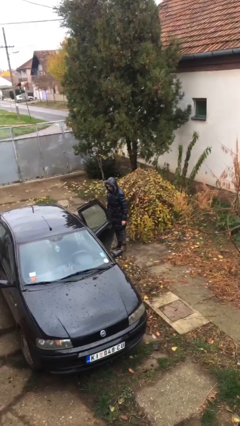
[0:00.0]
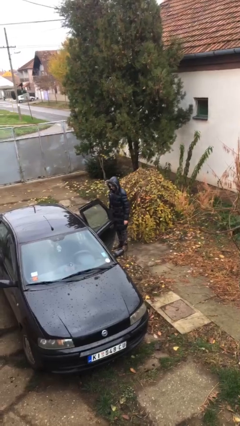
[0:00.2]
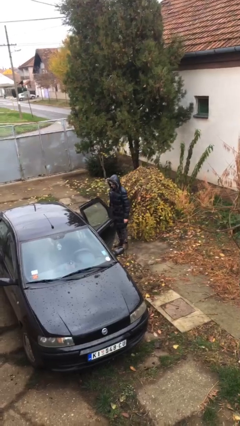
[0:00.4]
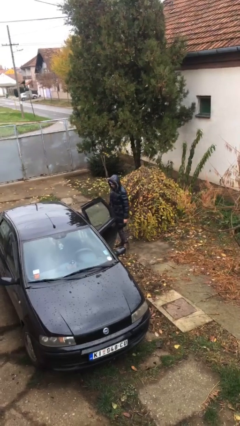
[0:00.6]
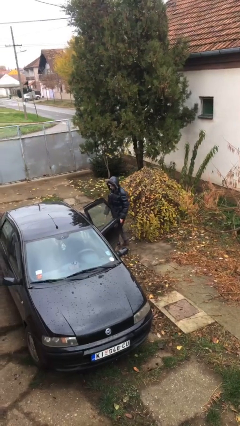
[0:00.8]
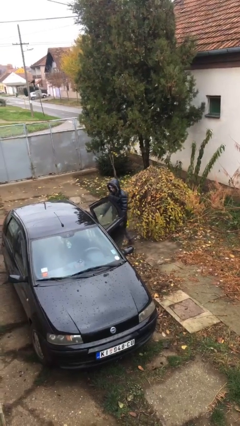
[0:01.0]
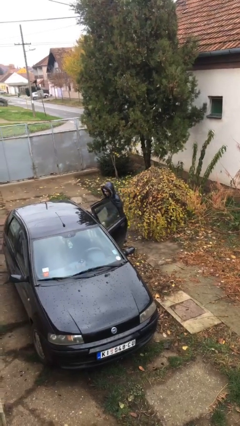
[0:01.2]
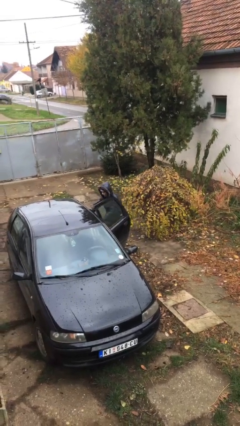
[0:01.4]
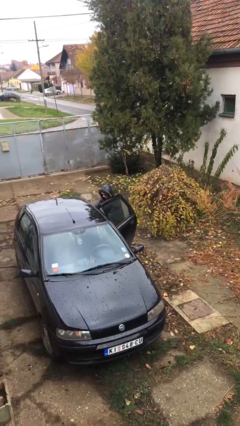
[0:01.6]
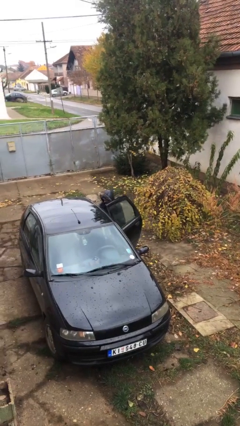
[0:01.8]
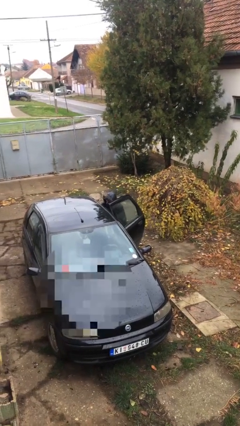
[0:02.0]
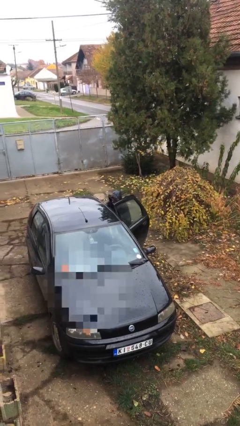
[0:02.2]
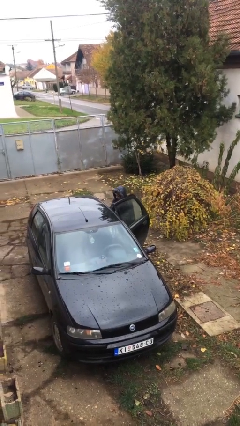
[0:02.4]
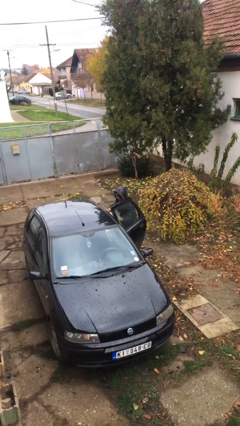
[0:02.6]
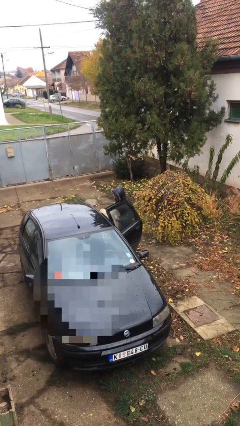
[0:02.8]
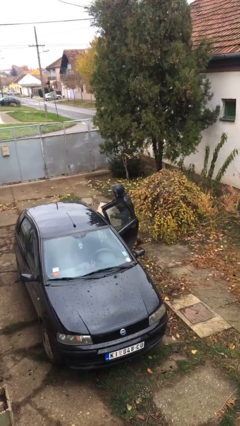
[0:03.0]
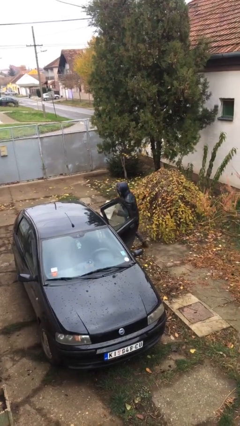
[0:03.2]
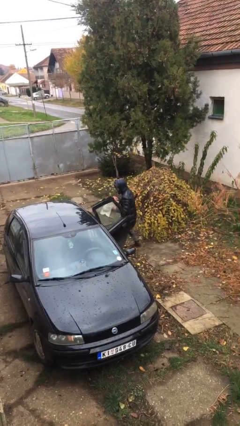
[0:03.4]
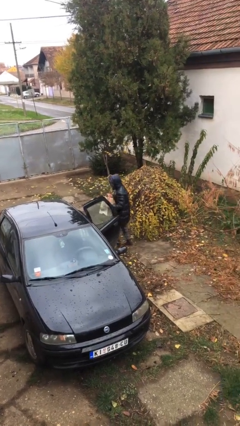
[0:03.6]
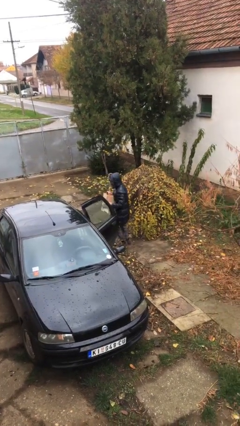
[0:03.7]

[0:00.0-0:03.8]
person unloads car

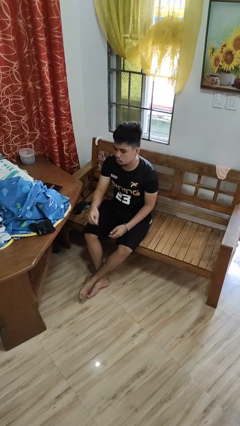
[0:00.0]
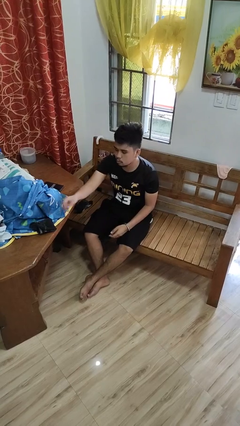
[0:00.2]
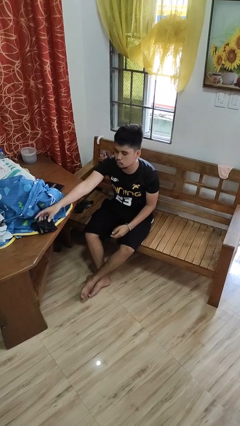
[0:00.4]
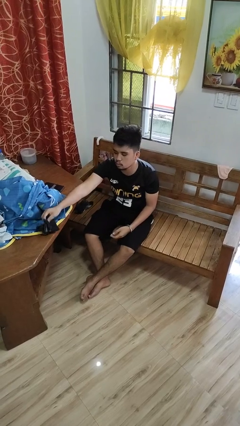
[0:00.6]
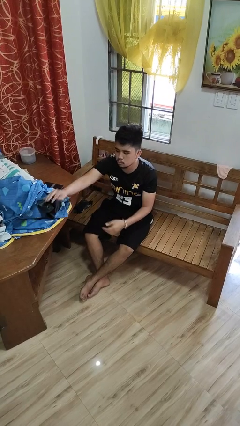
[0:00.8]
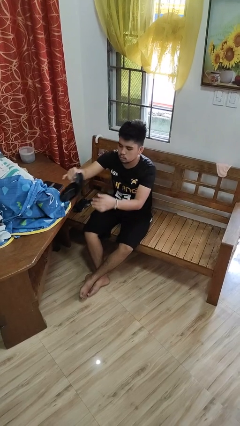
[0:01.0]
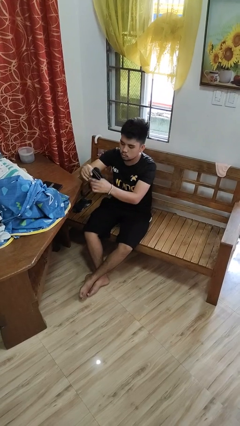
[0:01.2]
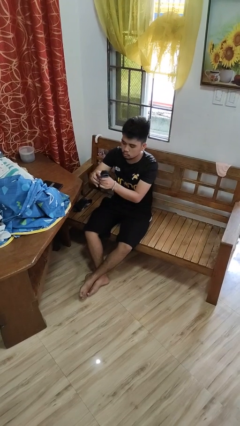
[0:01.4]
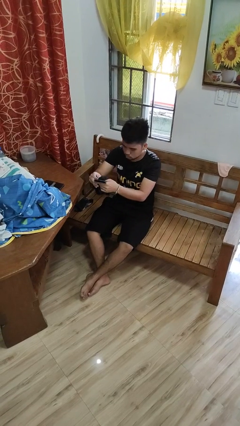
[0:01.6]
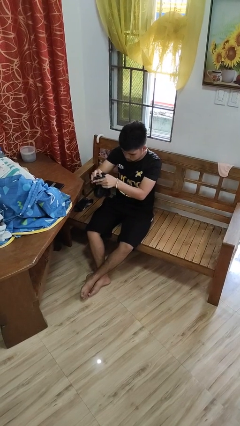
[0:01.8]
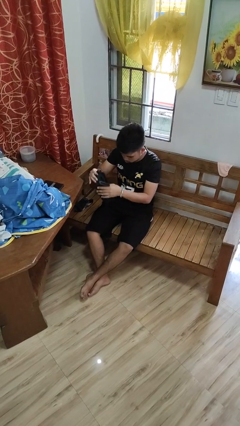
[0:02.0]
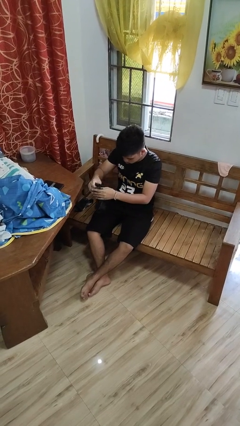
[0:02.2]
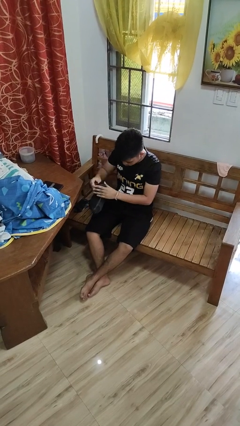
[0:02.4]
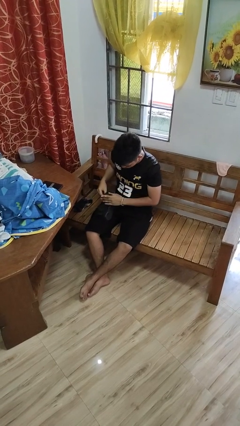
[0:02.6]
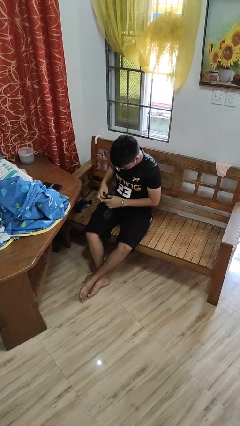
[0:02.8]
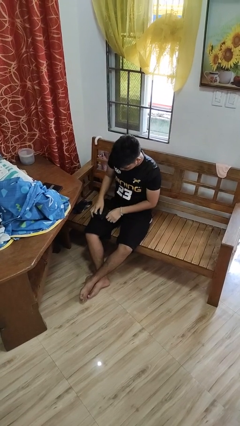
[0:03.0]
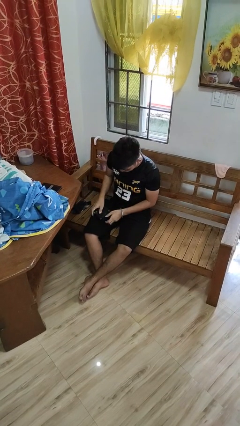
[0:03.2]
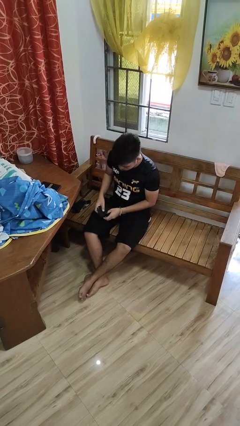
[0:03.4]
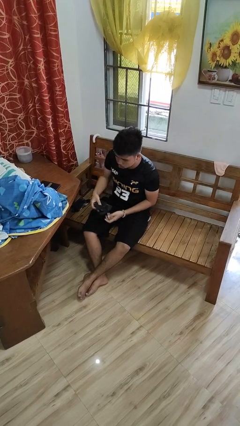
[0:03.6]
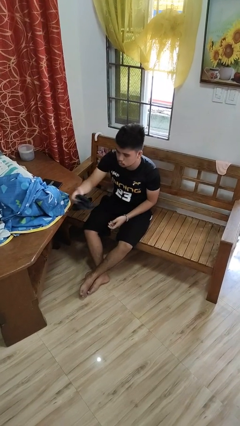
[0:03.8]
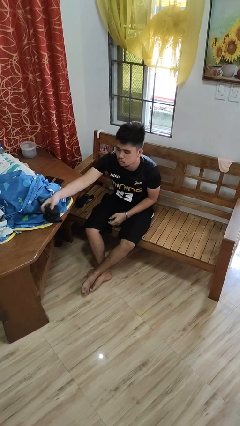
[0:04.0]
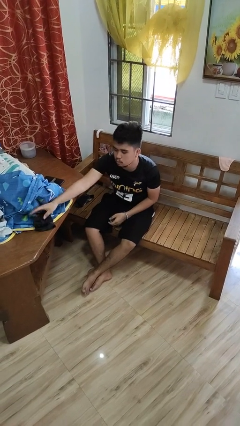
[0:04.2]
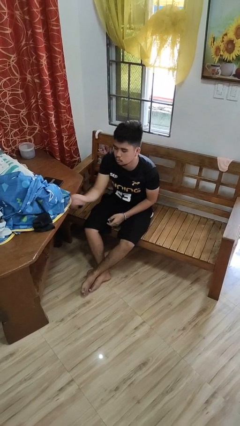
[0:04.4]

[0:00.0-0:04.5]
person folds socks

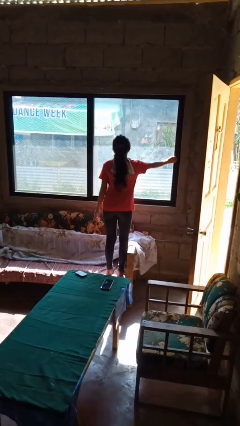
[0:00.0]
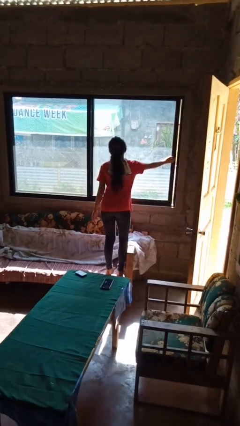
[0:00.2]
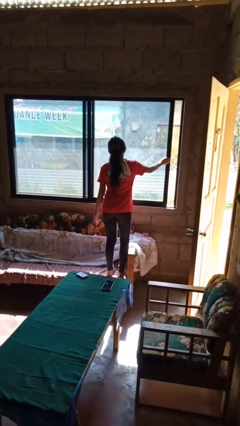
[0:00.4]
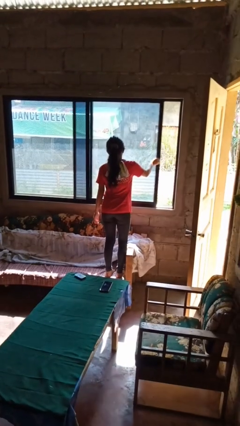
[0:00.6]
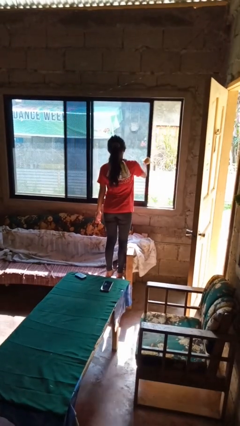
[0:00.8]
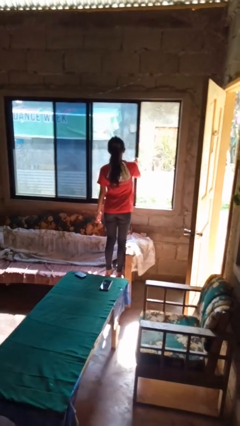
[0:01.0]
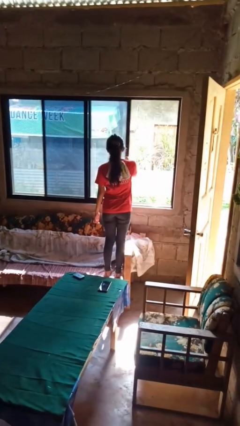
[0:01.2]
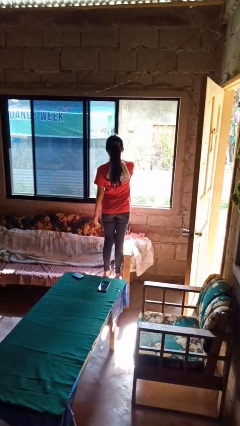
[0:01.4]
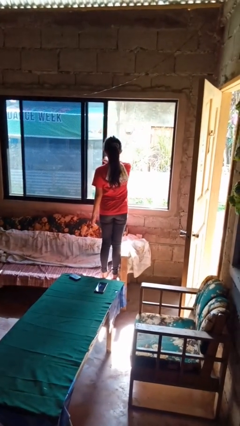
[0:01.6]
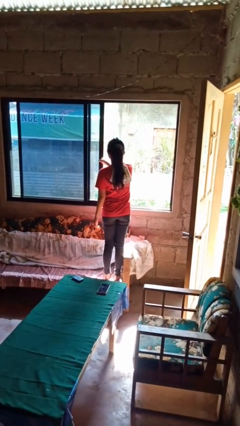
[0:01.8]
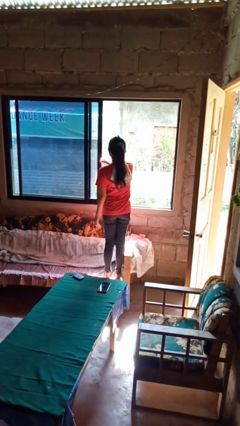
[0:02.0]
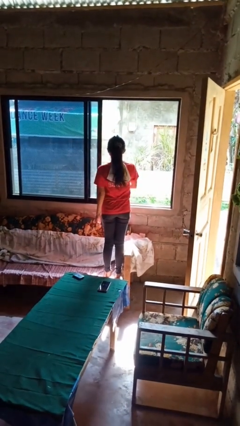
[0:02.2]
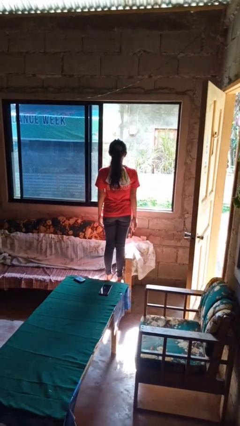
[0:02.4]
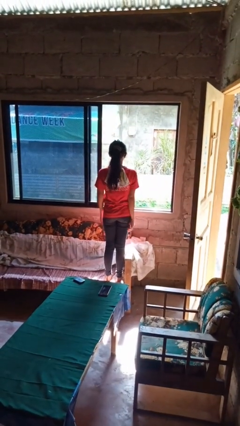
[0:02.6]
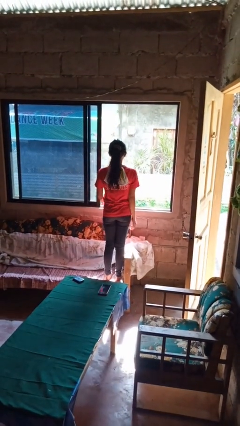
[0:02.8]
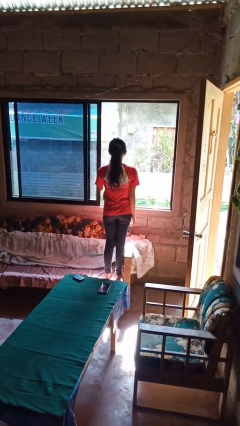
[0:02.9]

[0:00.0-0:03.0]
person opens home window

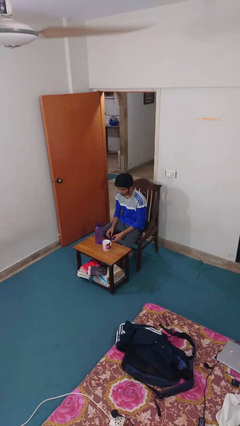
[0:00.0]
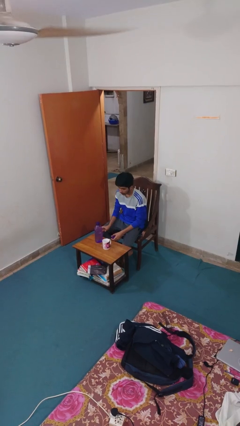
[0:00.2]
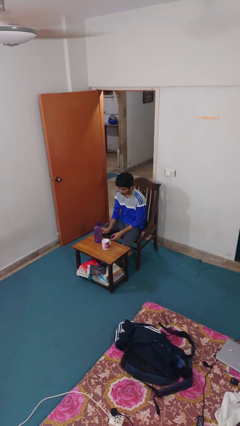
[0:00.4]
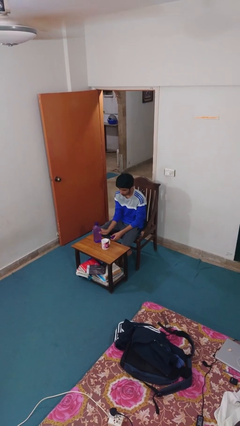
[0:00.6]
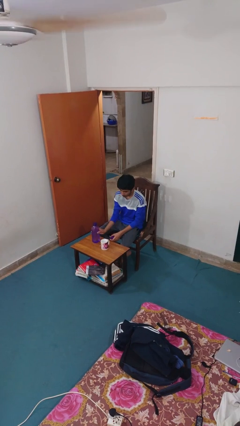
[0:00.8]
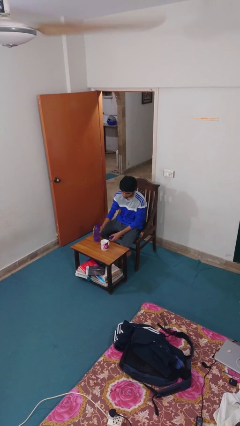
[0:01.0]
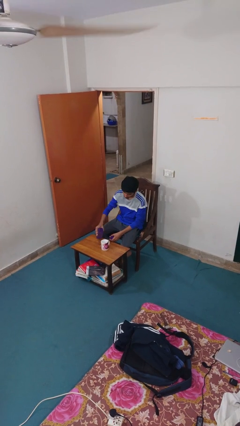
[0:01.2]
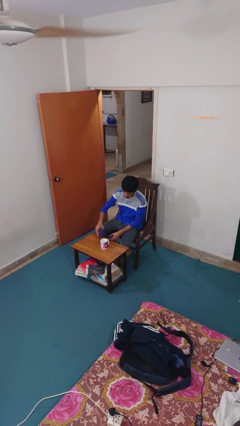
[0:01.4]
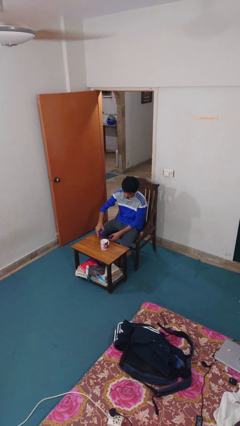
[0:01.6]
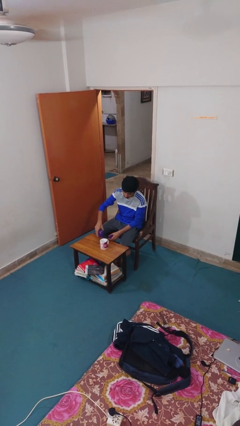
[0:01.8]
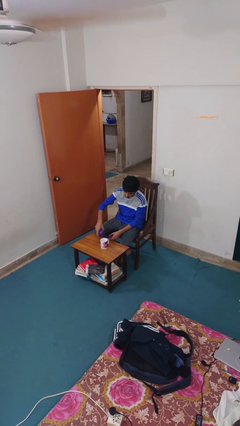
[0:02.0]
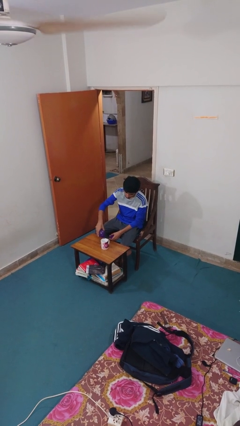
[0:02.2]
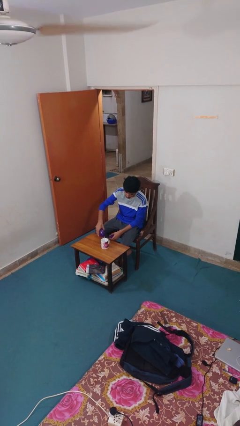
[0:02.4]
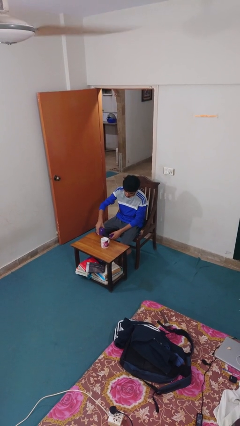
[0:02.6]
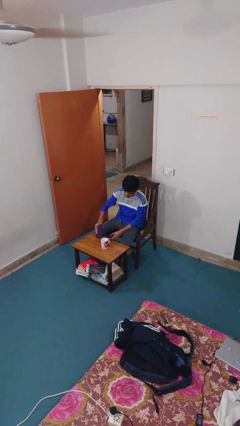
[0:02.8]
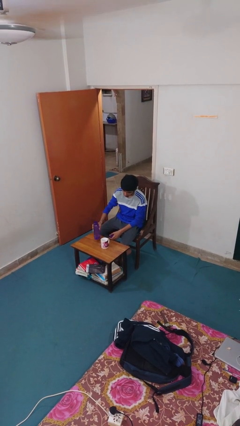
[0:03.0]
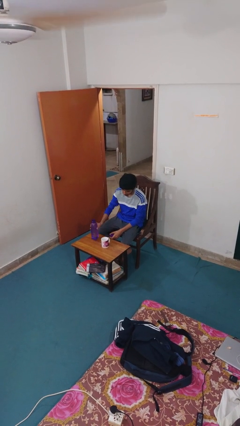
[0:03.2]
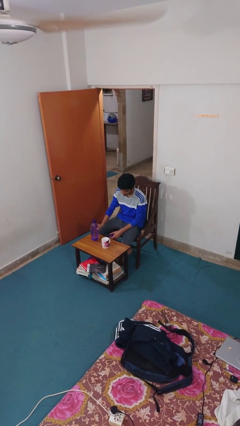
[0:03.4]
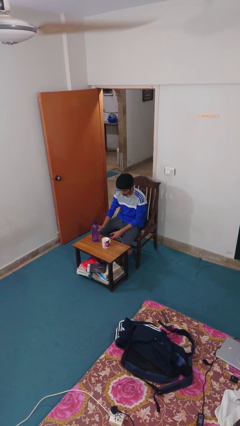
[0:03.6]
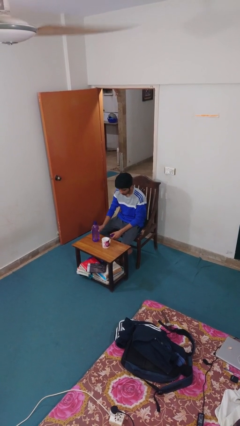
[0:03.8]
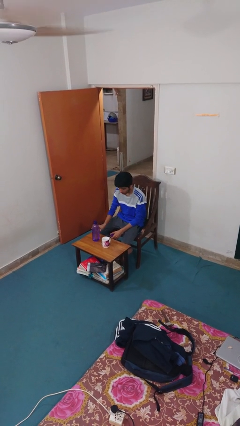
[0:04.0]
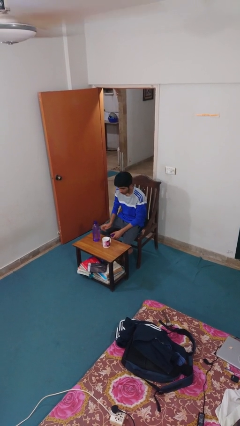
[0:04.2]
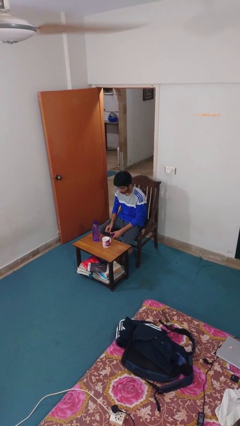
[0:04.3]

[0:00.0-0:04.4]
person pours liquid into cup

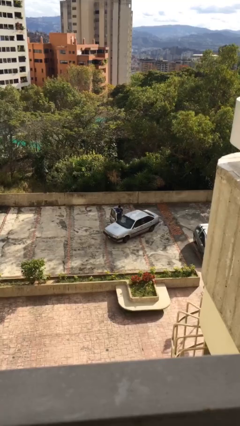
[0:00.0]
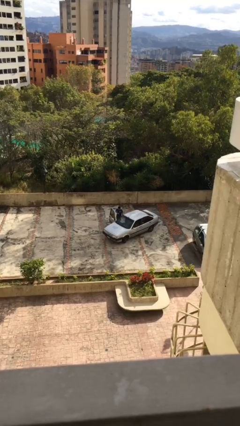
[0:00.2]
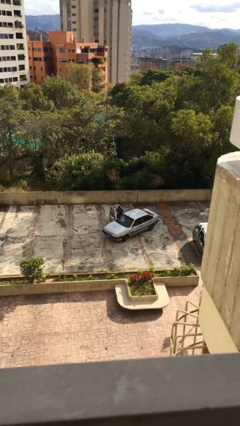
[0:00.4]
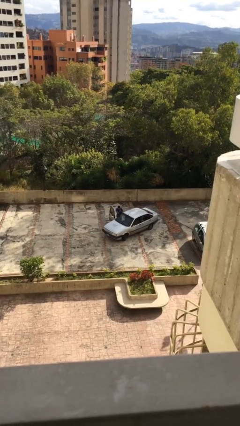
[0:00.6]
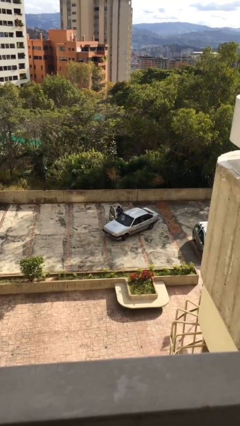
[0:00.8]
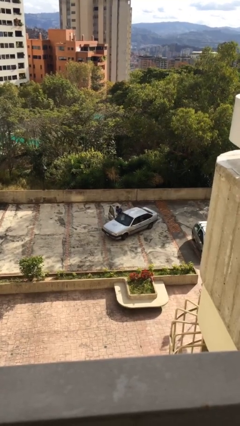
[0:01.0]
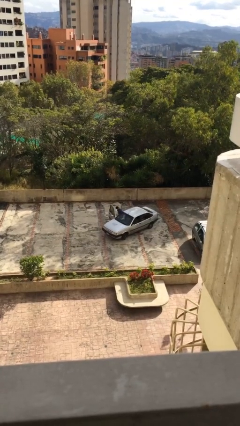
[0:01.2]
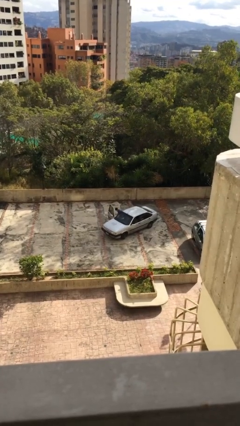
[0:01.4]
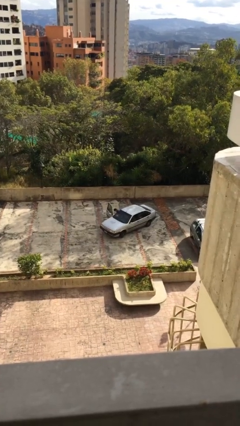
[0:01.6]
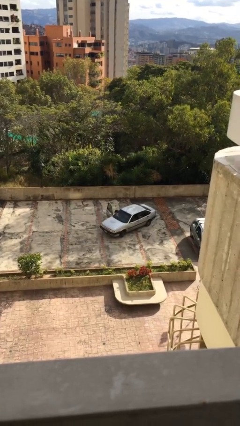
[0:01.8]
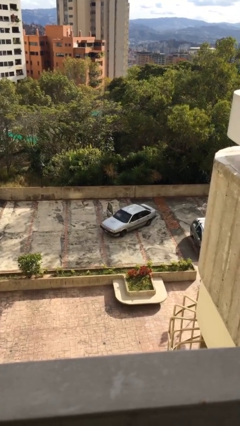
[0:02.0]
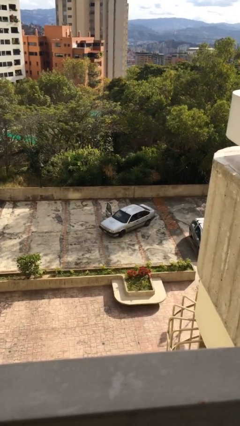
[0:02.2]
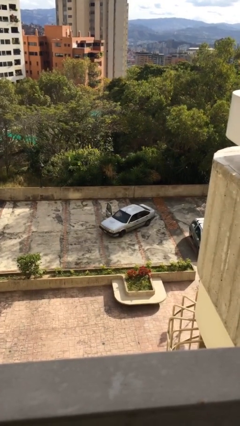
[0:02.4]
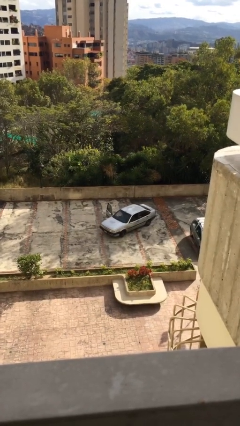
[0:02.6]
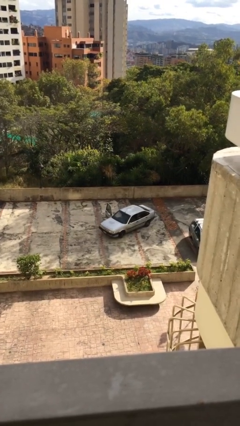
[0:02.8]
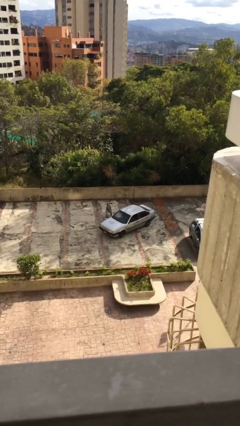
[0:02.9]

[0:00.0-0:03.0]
person enters car
